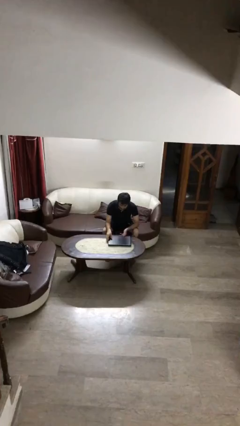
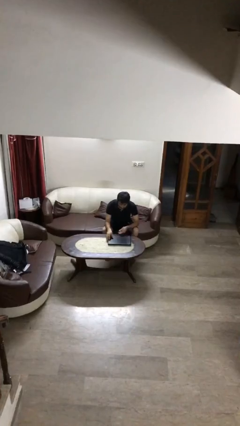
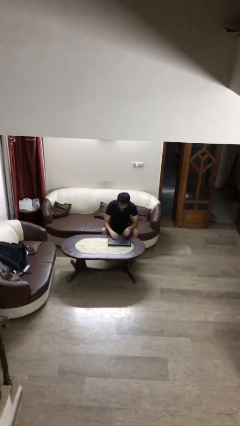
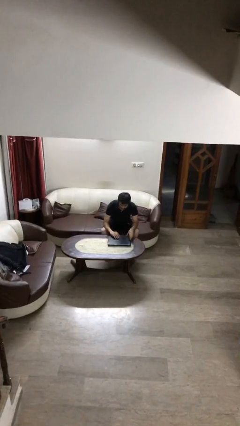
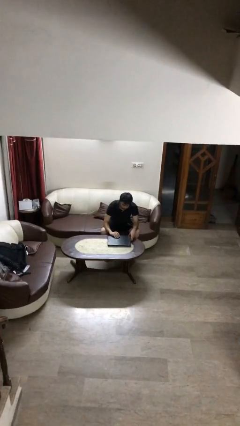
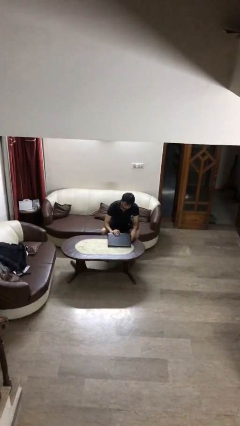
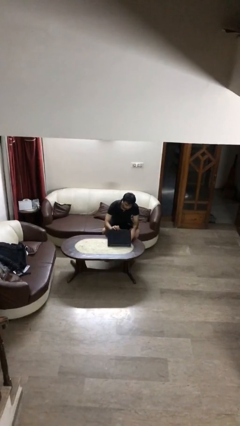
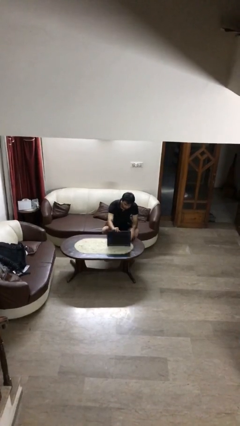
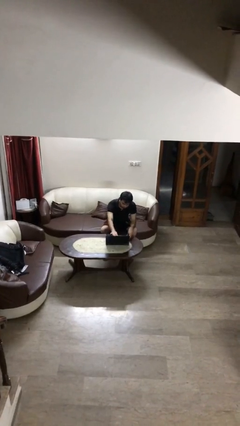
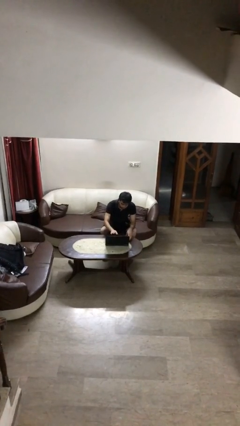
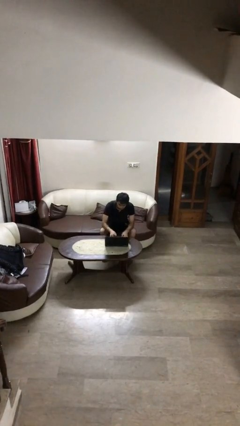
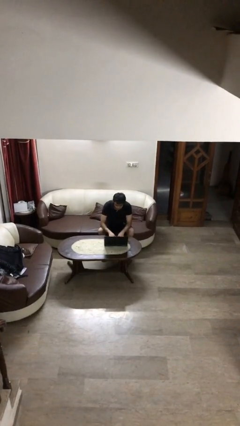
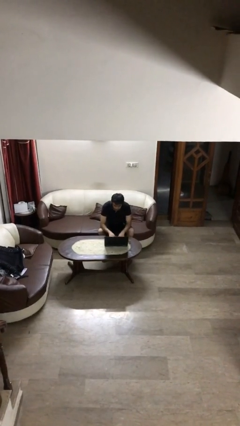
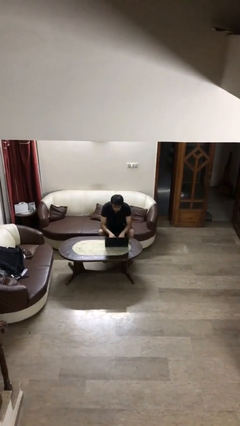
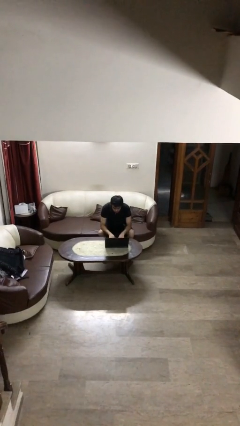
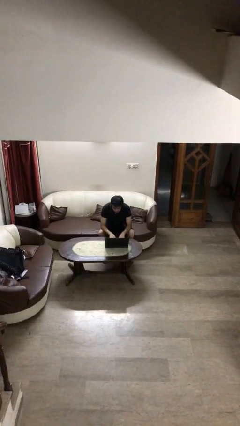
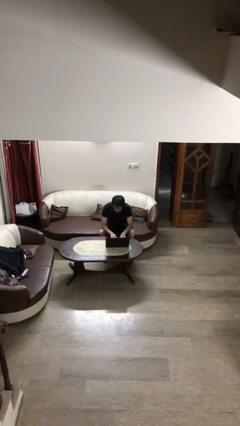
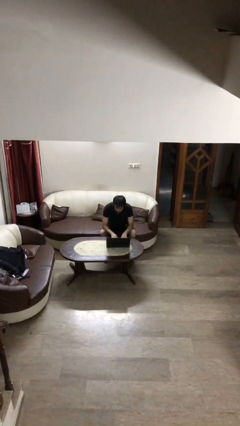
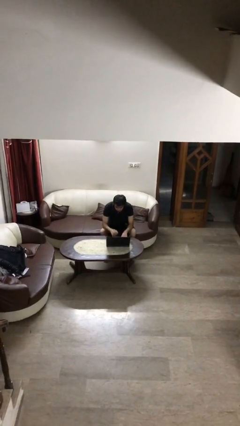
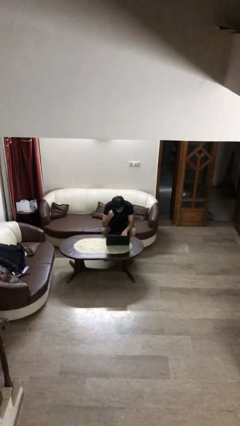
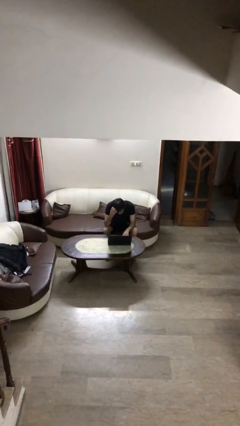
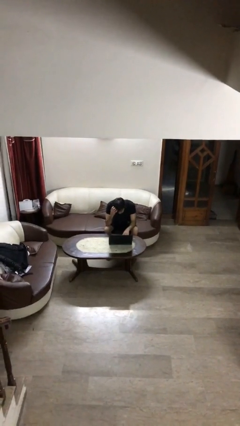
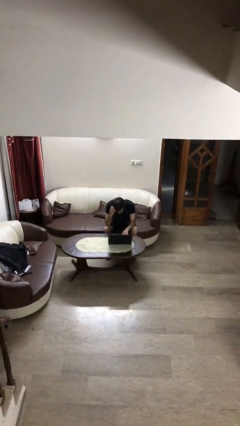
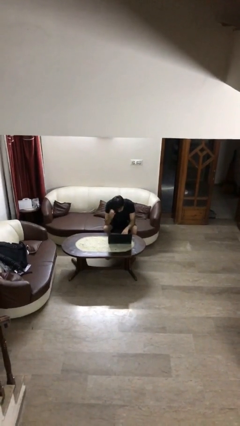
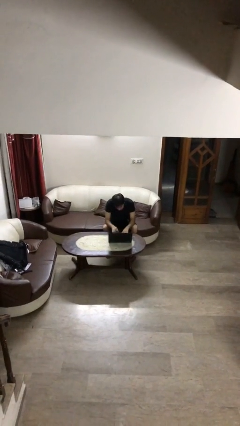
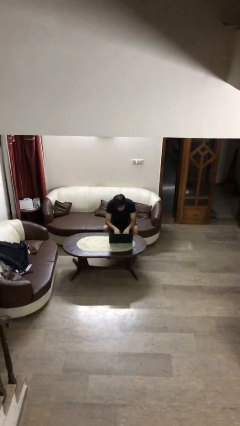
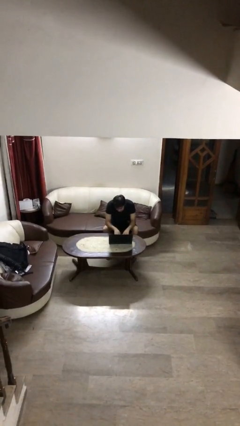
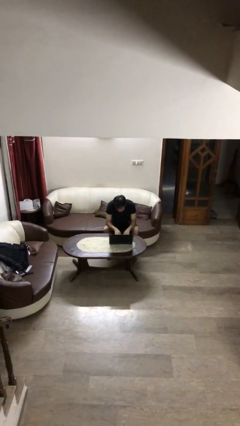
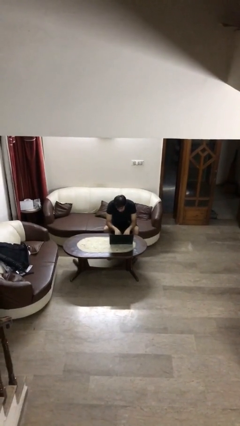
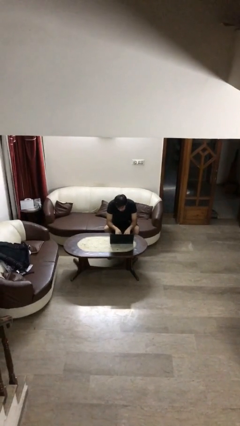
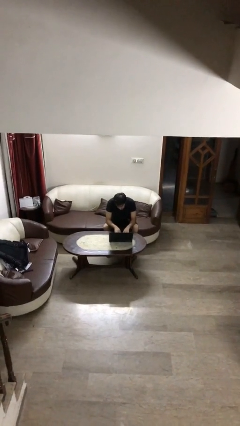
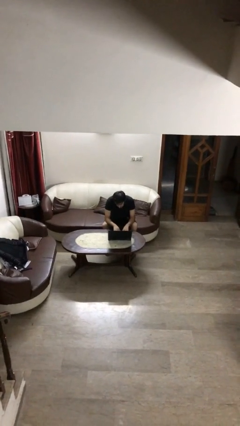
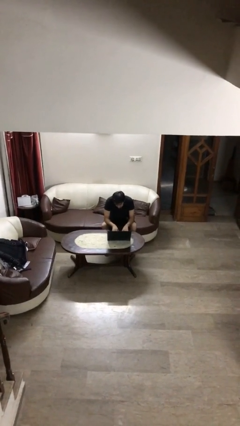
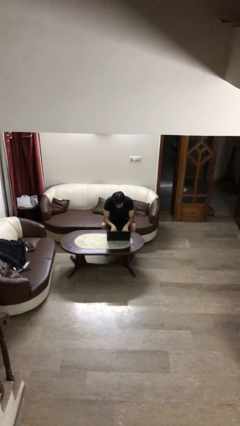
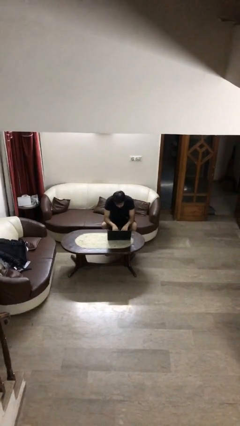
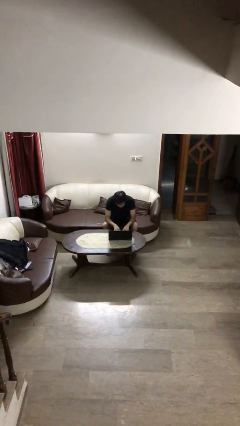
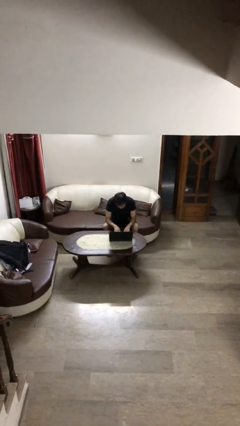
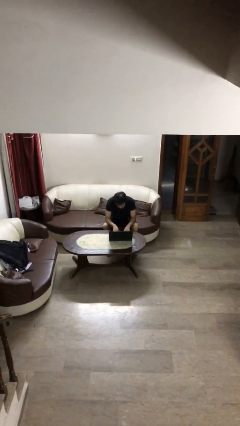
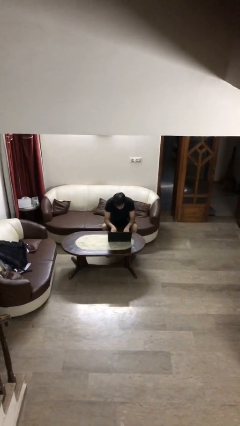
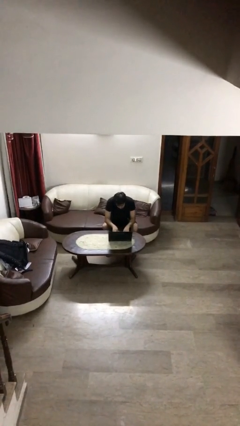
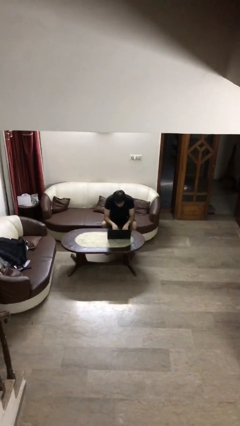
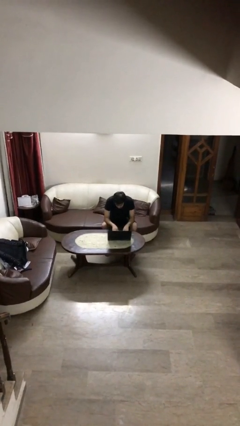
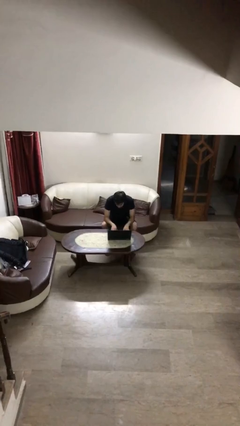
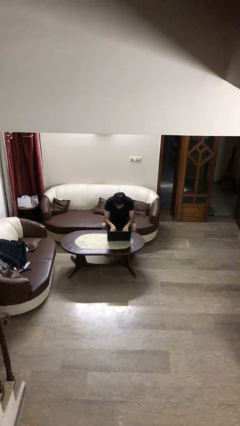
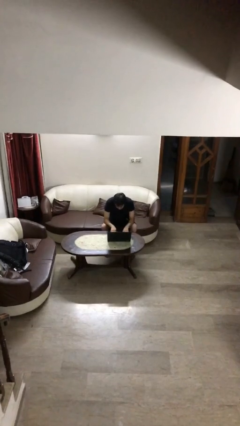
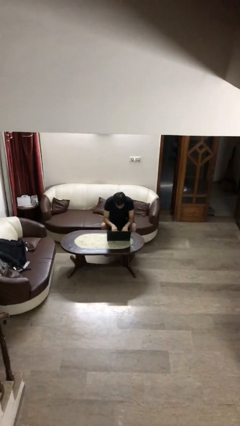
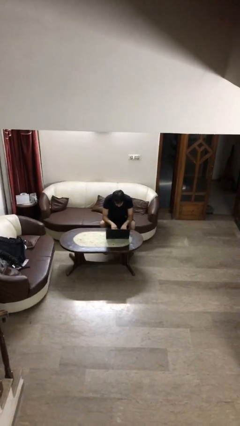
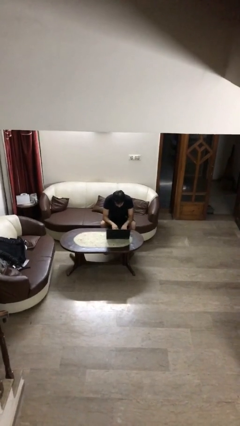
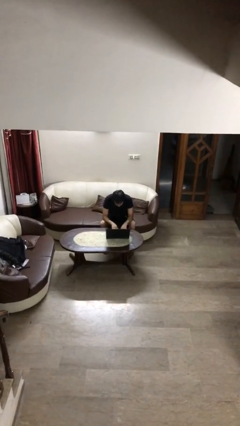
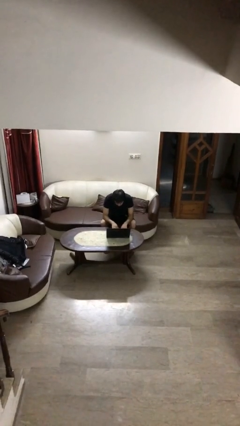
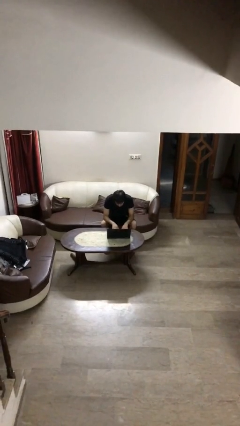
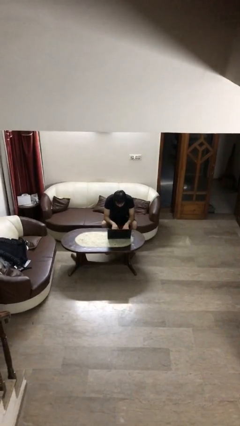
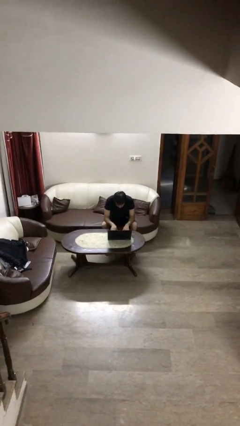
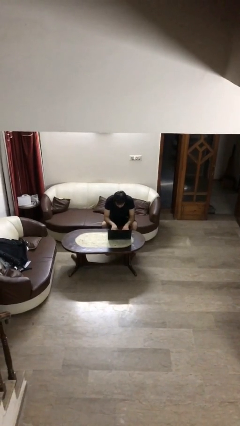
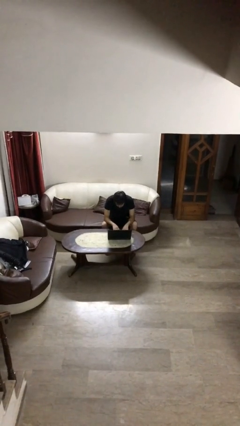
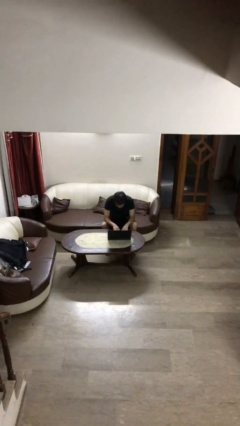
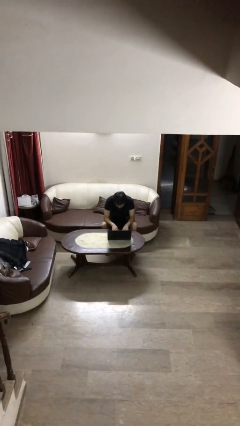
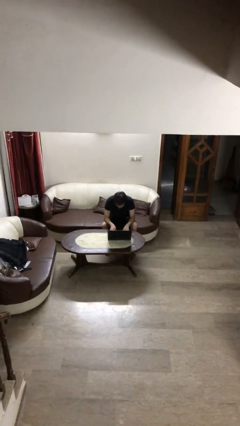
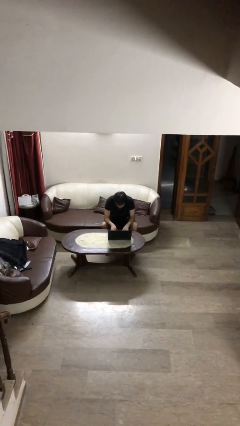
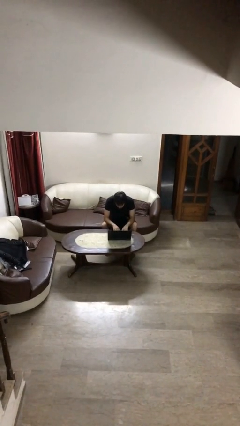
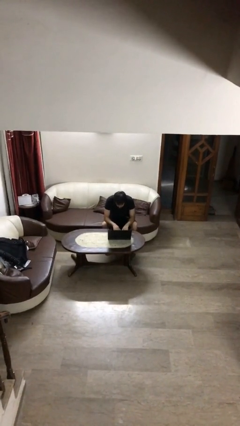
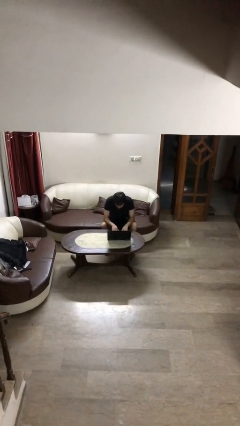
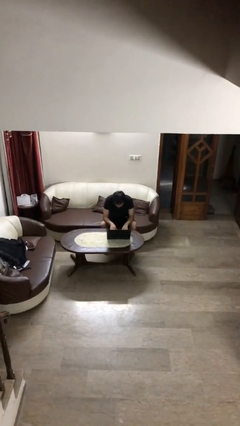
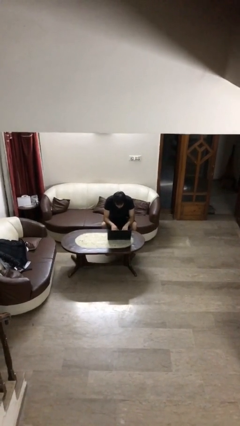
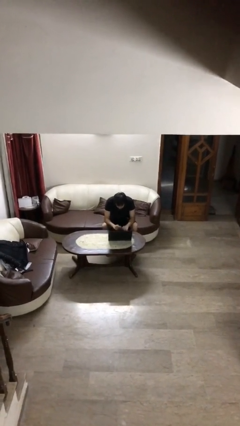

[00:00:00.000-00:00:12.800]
person interacts with laptop

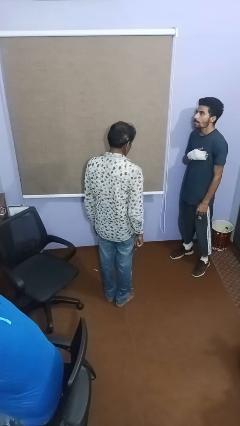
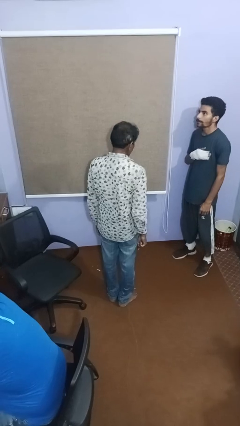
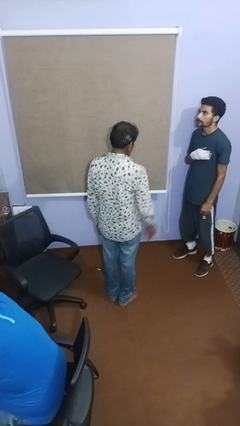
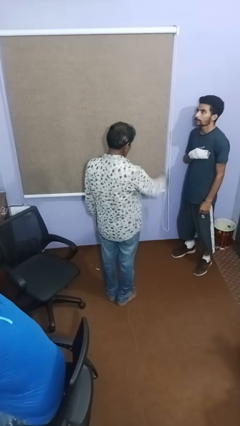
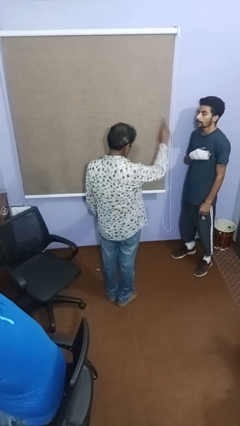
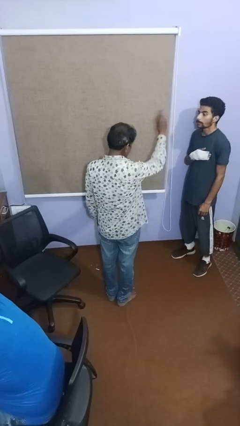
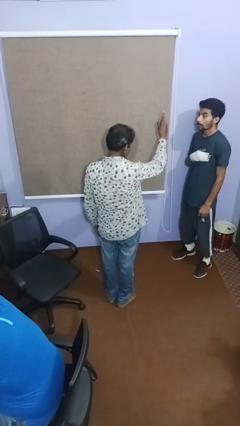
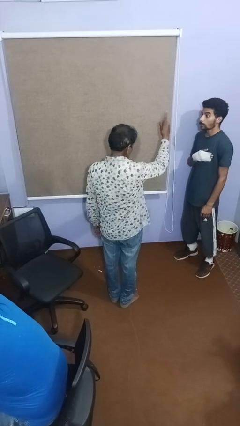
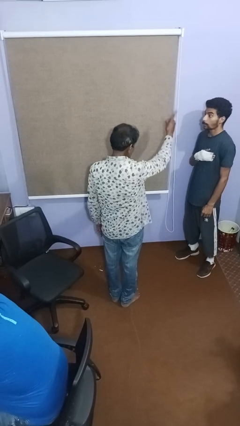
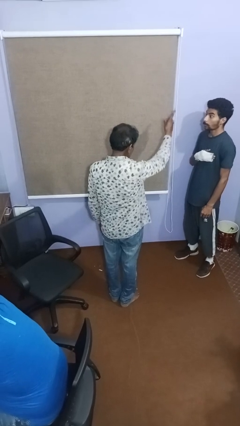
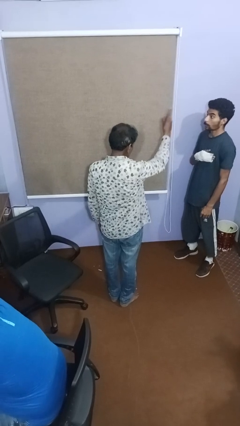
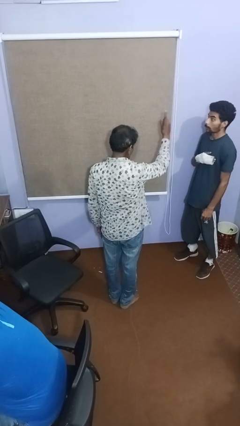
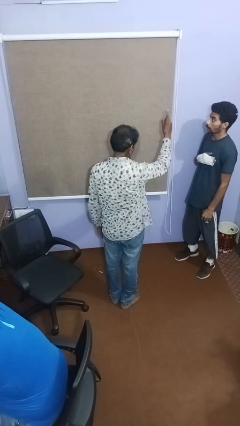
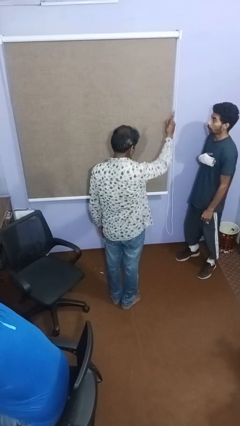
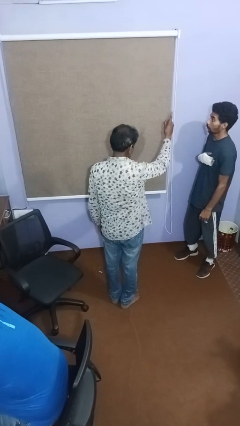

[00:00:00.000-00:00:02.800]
person points at person

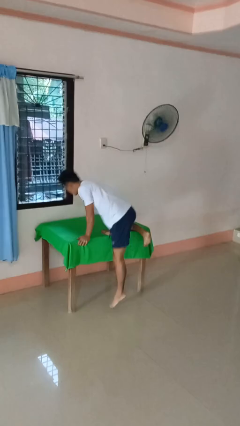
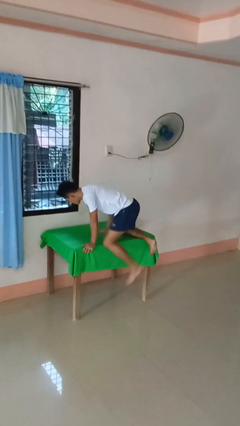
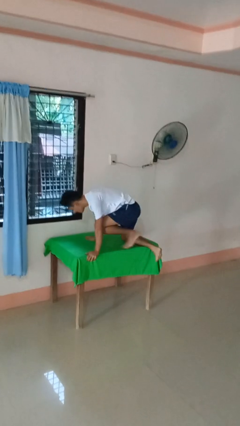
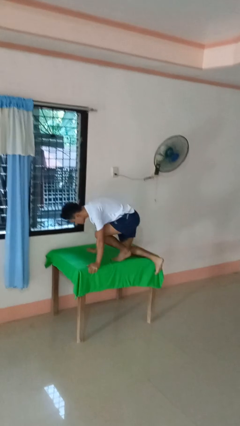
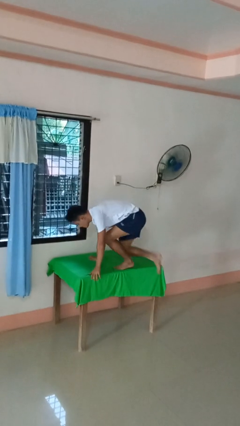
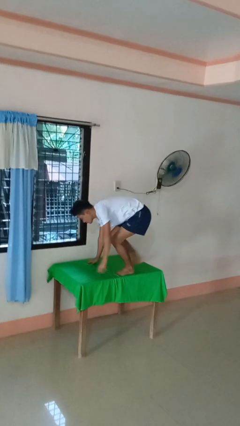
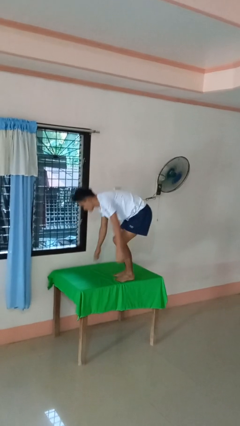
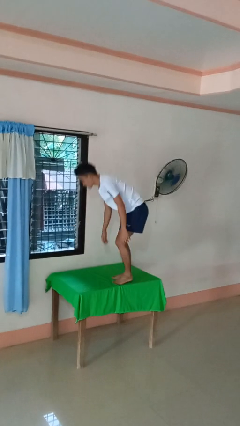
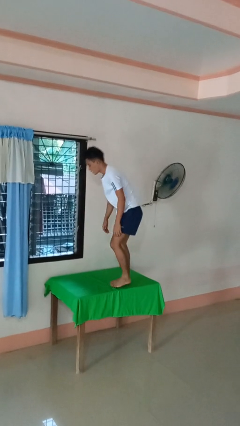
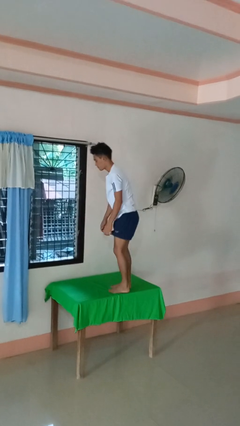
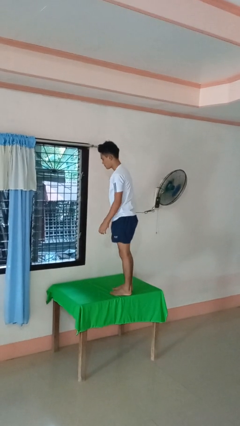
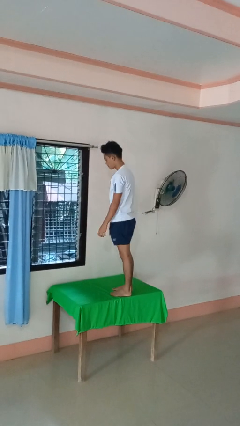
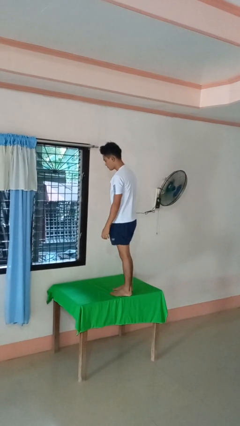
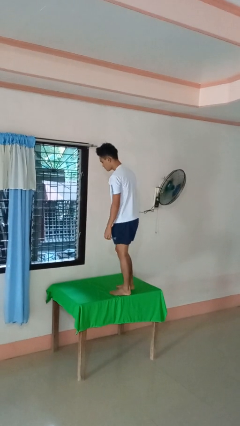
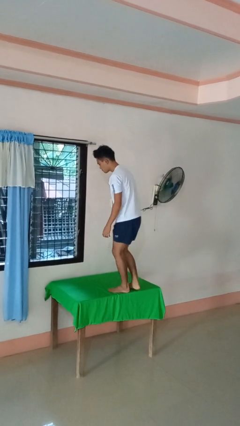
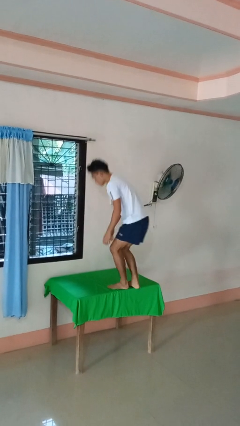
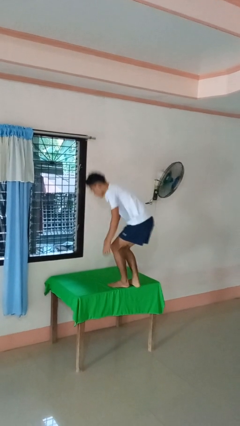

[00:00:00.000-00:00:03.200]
person climbs on table
